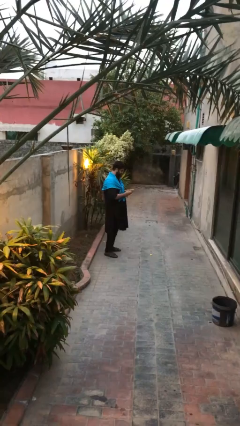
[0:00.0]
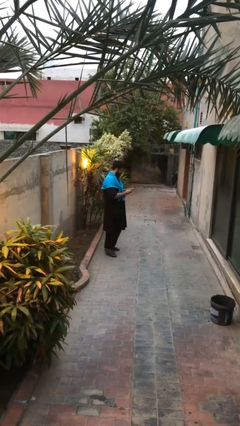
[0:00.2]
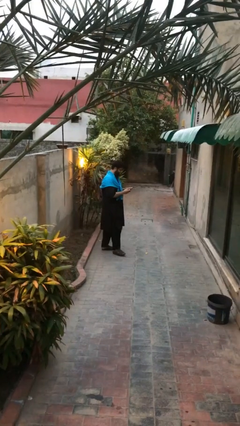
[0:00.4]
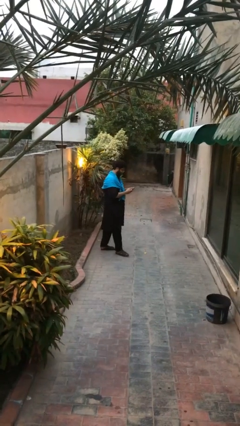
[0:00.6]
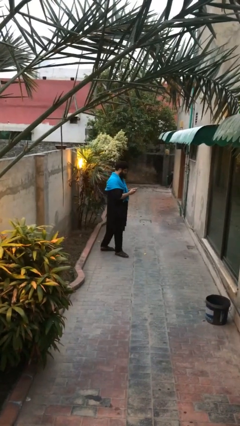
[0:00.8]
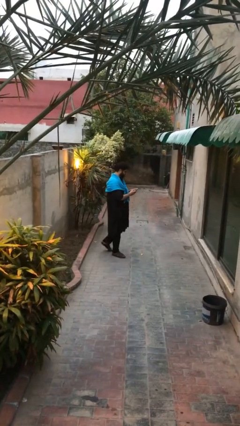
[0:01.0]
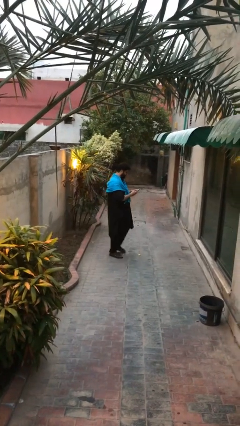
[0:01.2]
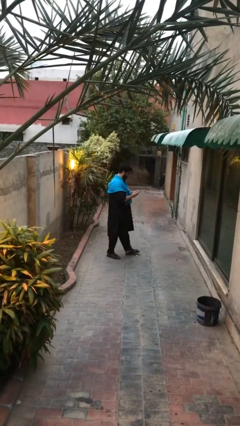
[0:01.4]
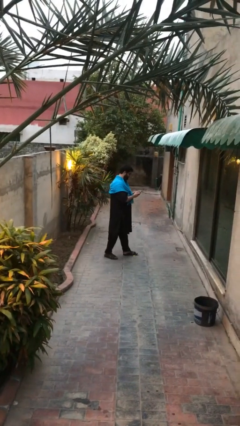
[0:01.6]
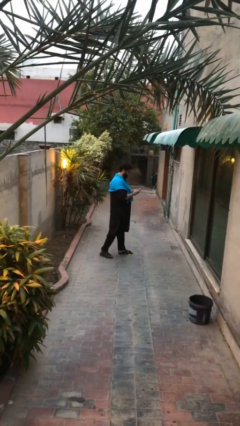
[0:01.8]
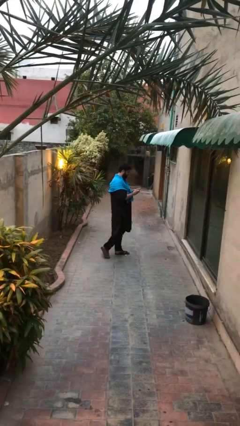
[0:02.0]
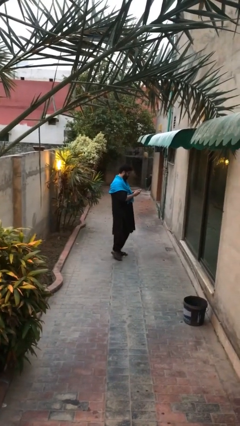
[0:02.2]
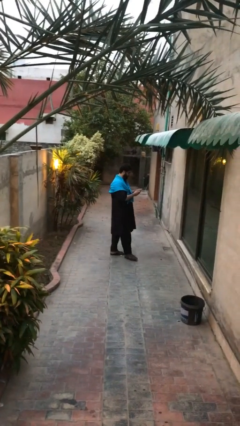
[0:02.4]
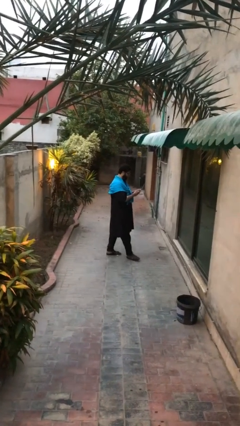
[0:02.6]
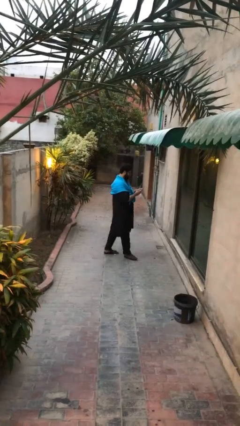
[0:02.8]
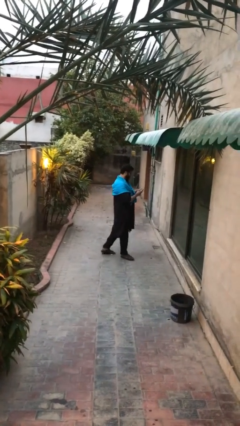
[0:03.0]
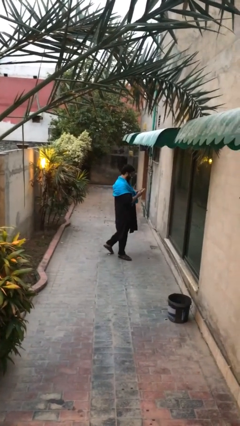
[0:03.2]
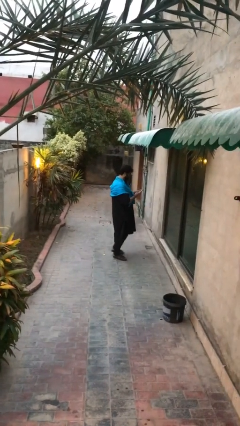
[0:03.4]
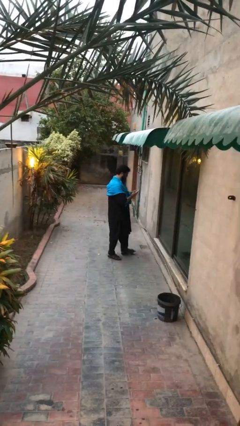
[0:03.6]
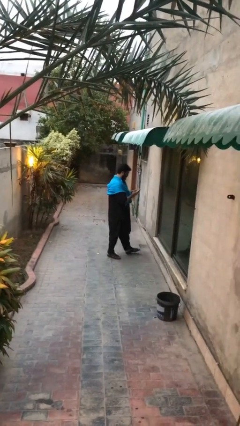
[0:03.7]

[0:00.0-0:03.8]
person texts on phone

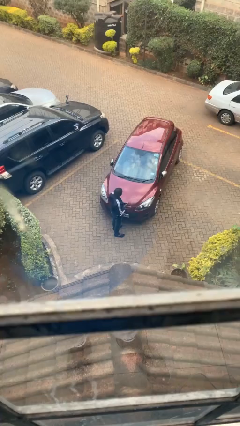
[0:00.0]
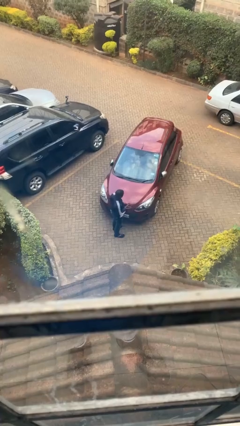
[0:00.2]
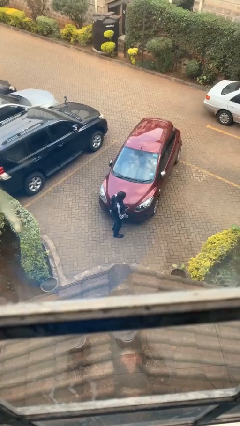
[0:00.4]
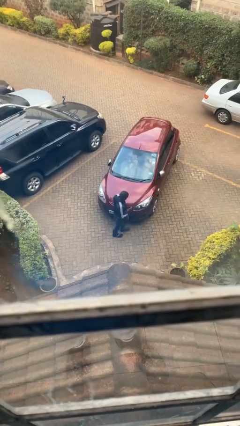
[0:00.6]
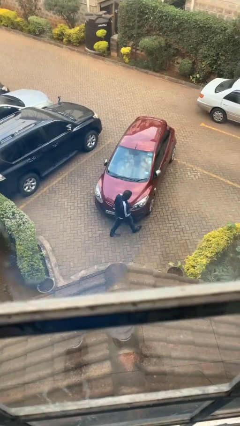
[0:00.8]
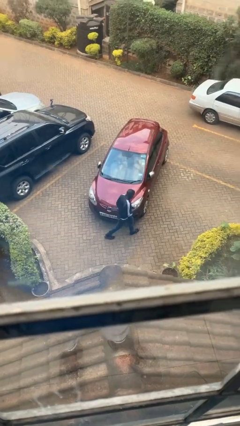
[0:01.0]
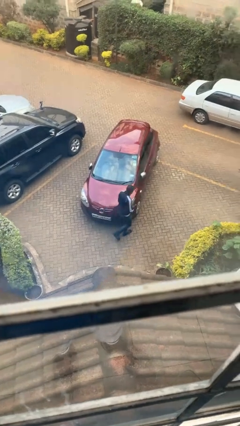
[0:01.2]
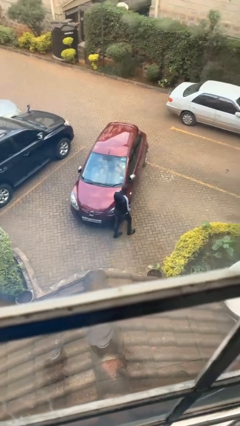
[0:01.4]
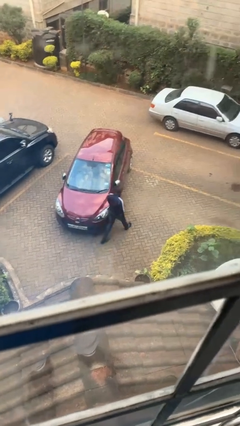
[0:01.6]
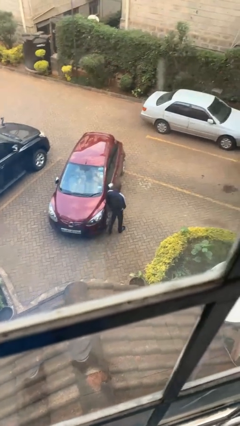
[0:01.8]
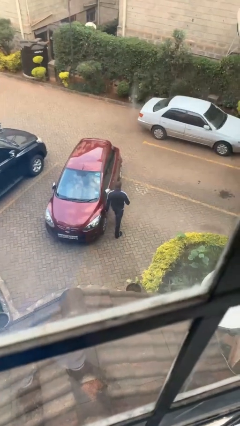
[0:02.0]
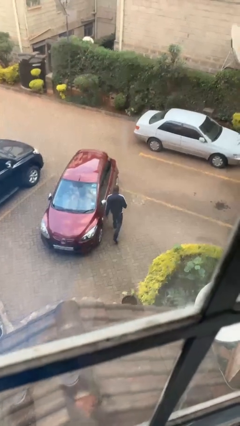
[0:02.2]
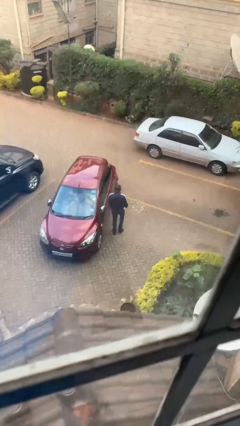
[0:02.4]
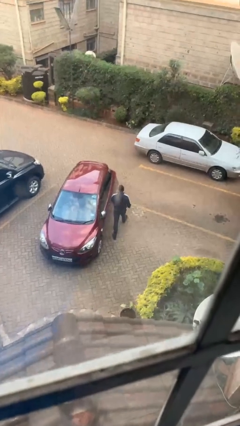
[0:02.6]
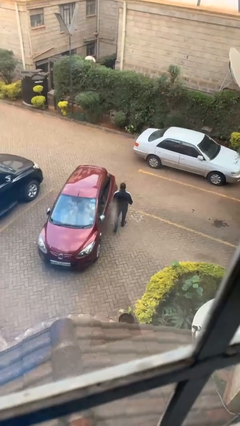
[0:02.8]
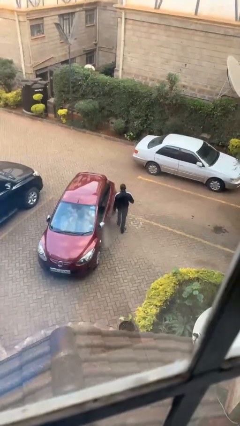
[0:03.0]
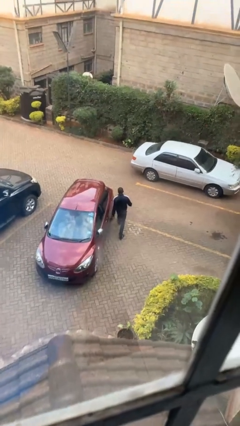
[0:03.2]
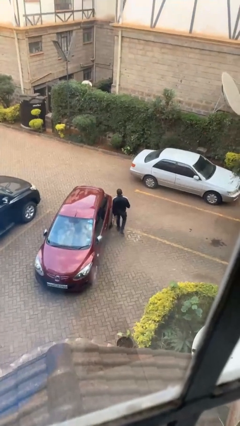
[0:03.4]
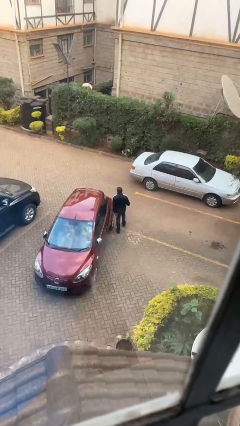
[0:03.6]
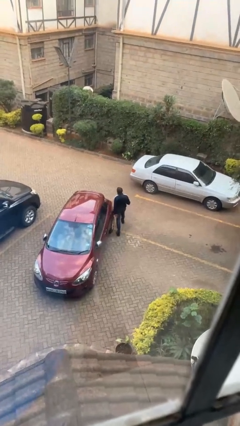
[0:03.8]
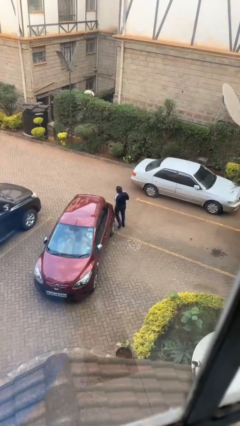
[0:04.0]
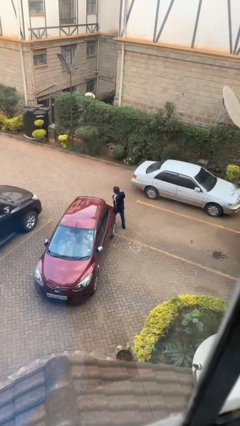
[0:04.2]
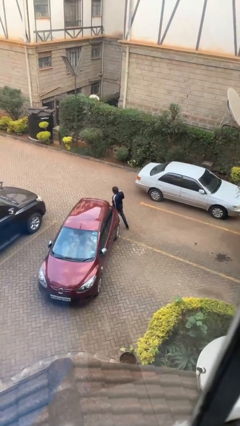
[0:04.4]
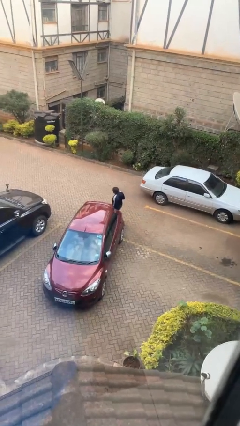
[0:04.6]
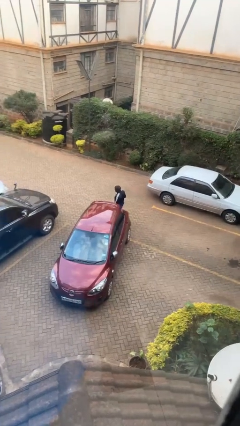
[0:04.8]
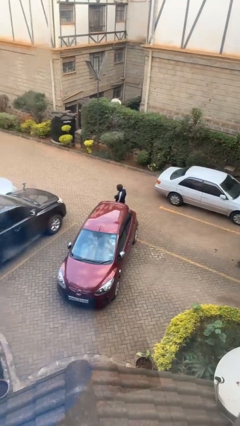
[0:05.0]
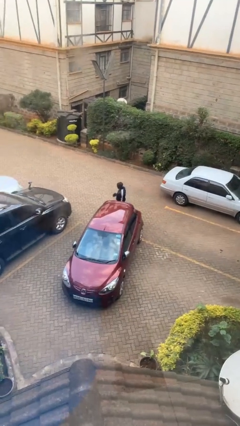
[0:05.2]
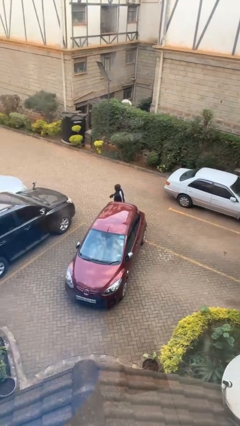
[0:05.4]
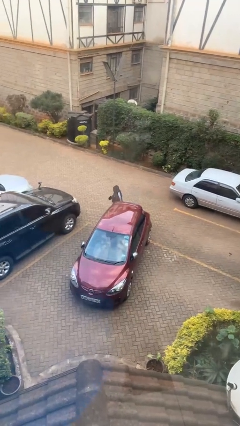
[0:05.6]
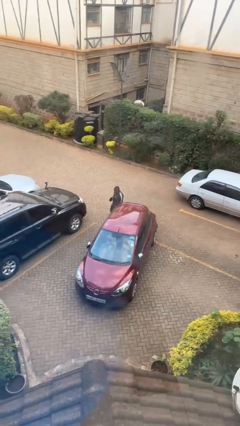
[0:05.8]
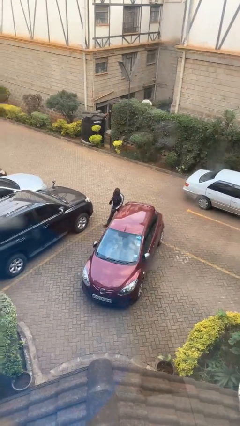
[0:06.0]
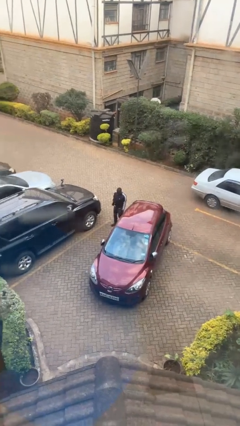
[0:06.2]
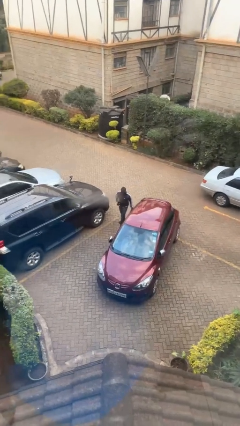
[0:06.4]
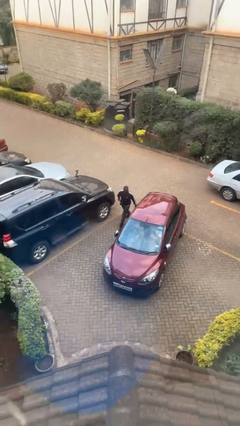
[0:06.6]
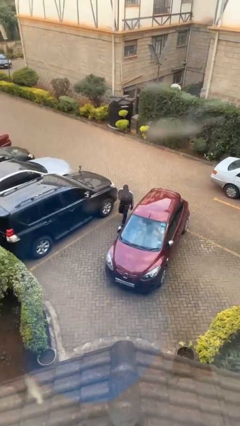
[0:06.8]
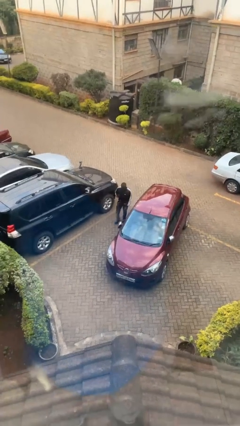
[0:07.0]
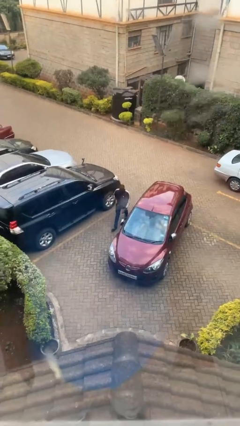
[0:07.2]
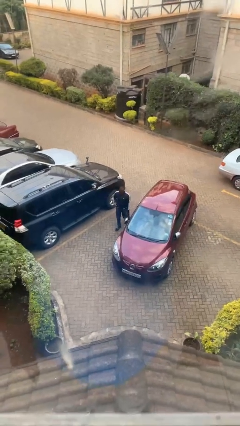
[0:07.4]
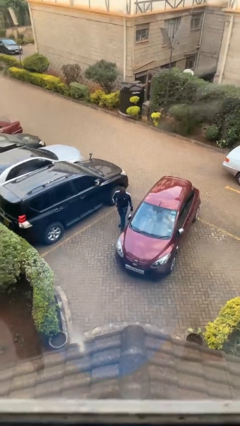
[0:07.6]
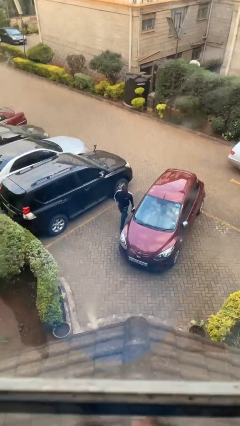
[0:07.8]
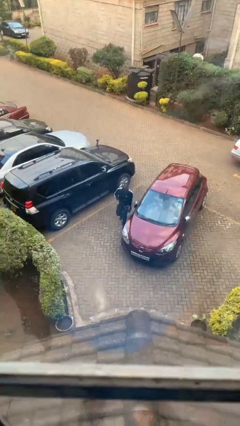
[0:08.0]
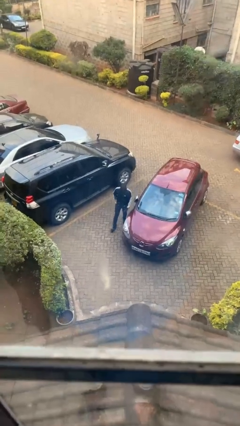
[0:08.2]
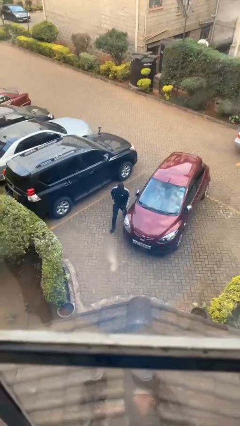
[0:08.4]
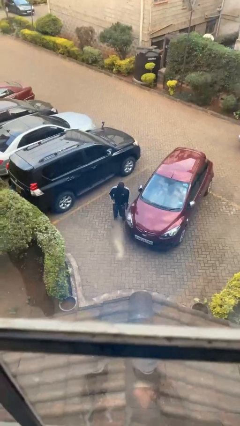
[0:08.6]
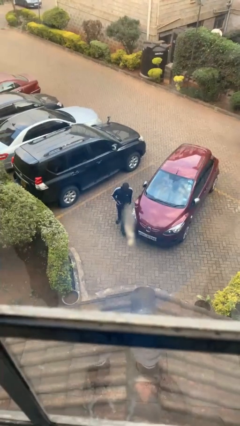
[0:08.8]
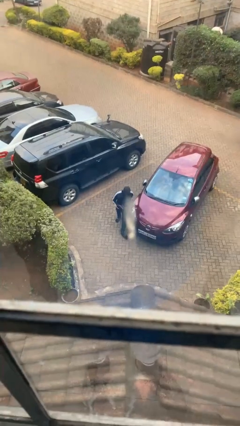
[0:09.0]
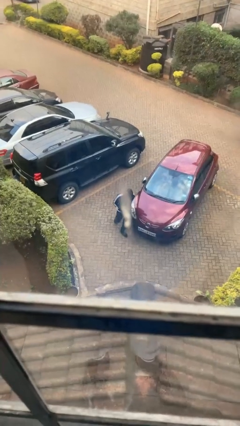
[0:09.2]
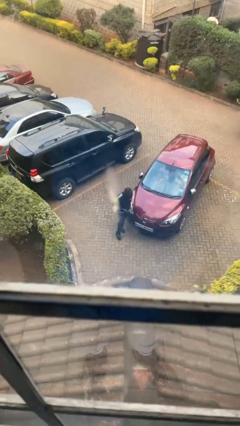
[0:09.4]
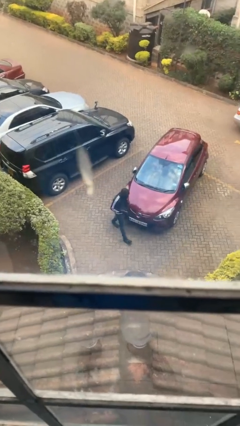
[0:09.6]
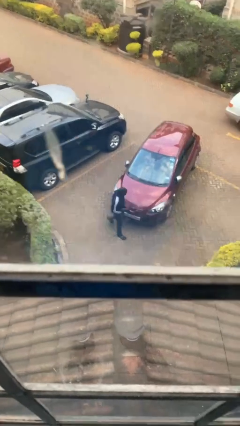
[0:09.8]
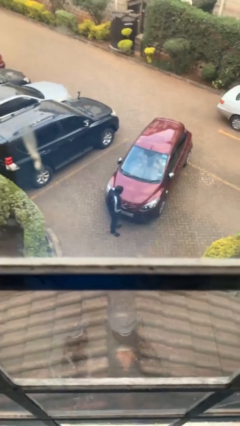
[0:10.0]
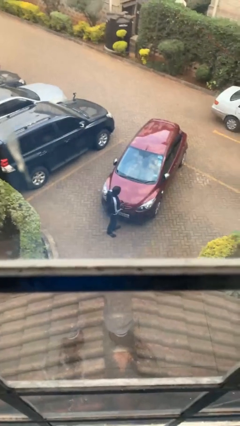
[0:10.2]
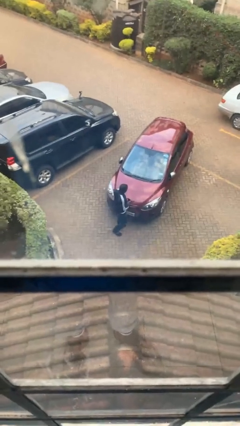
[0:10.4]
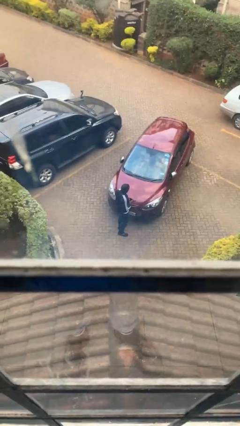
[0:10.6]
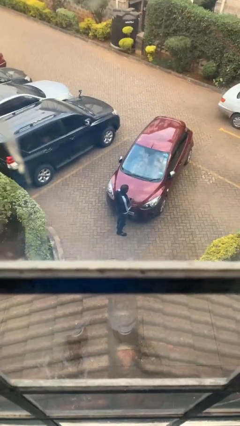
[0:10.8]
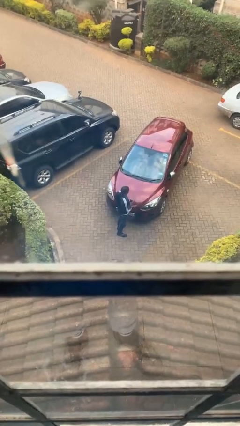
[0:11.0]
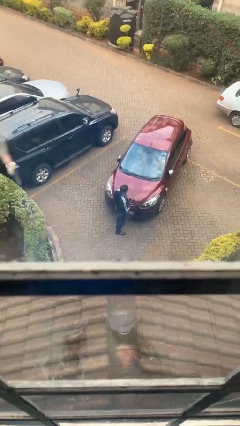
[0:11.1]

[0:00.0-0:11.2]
person walks around car

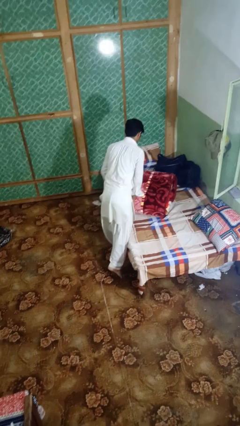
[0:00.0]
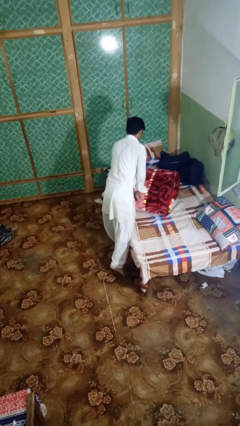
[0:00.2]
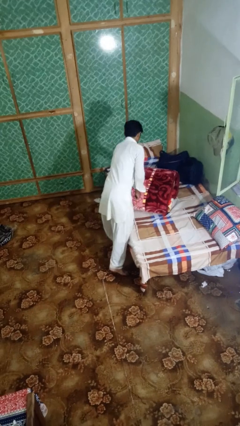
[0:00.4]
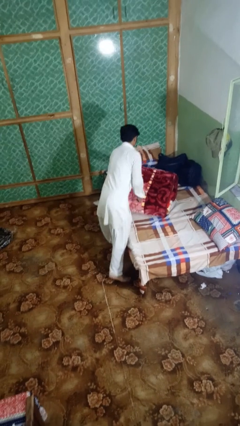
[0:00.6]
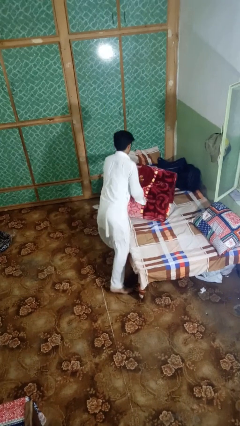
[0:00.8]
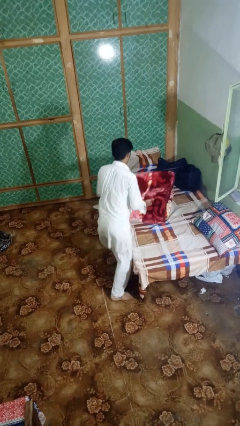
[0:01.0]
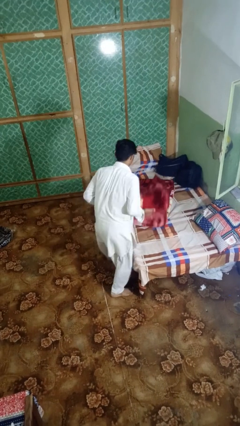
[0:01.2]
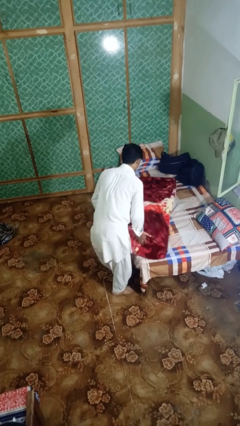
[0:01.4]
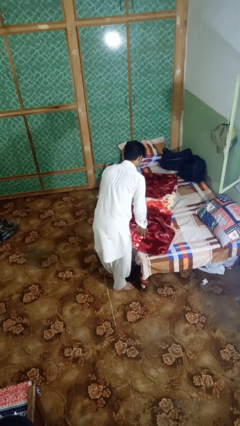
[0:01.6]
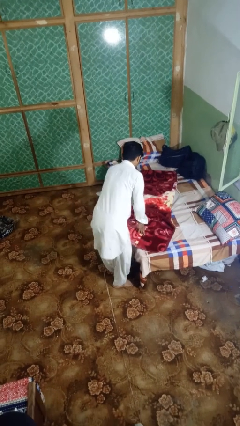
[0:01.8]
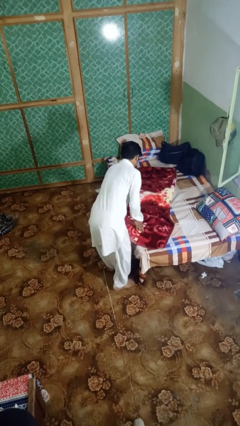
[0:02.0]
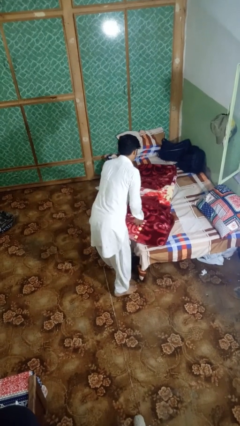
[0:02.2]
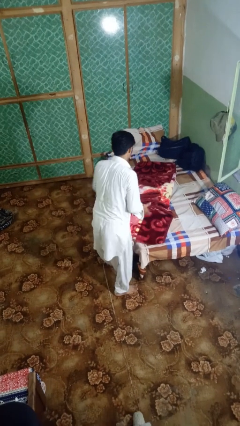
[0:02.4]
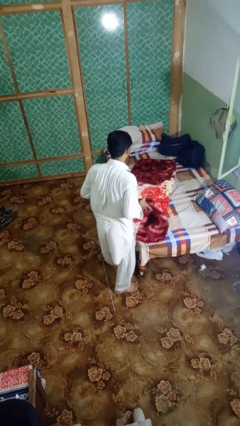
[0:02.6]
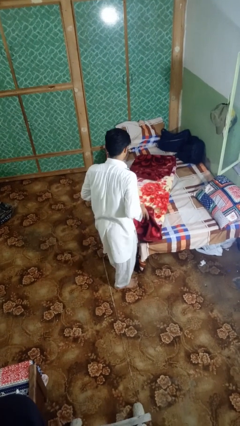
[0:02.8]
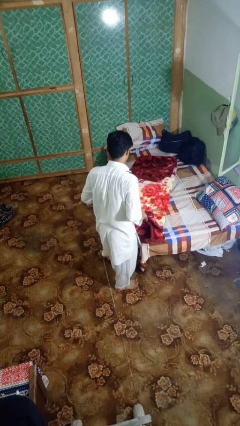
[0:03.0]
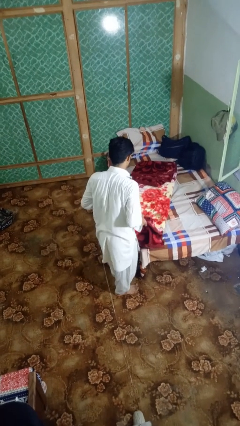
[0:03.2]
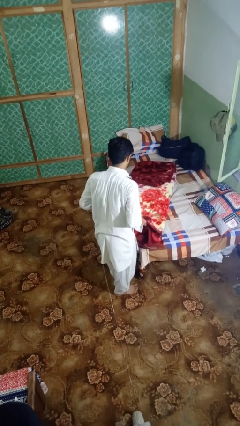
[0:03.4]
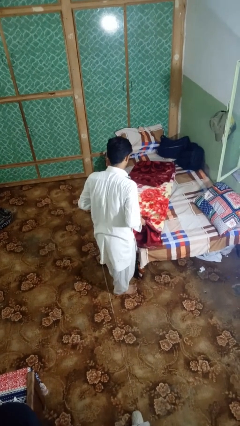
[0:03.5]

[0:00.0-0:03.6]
person unfolds blanket
